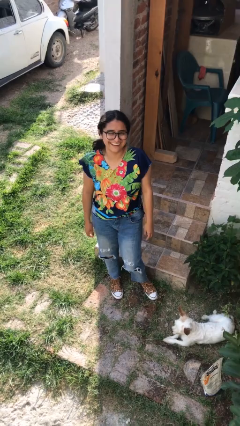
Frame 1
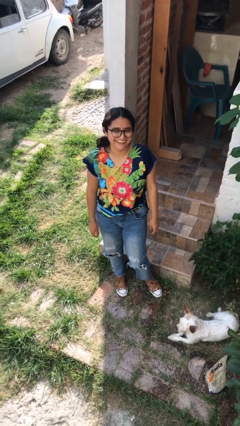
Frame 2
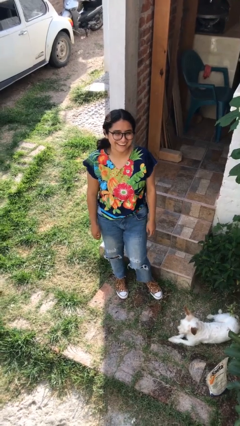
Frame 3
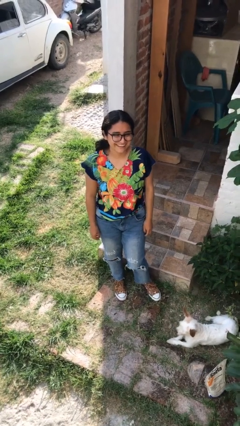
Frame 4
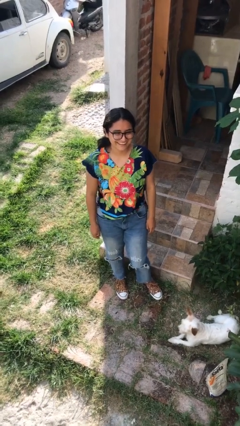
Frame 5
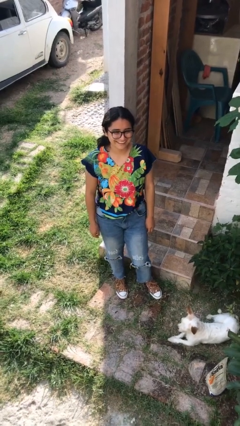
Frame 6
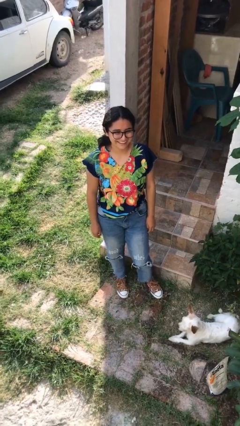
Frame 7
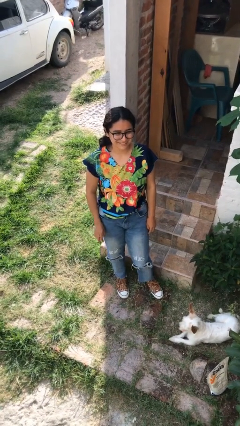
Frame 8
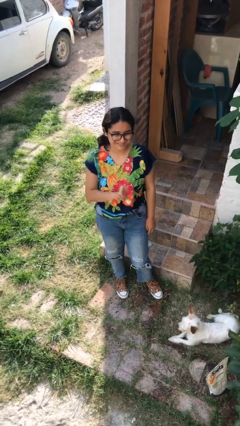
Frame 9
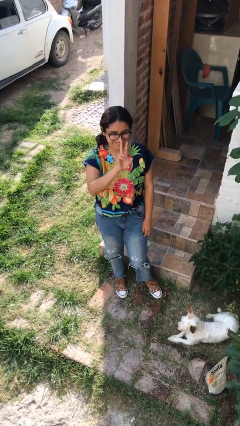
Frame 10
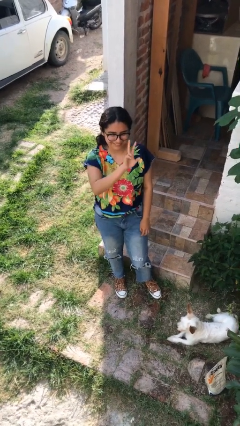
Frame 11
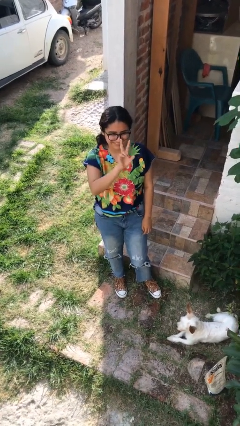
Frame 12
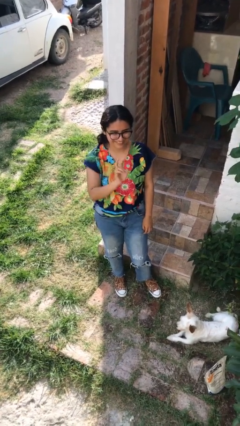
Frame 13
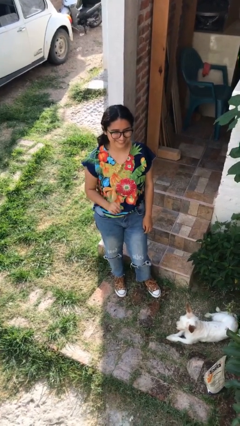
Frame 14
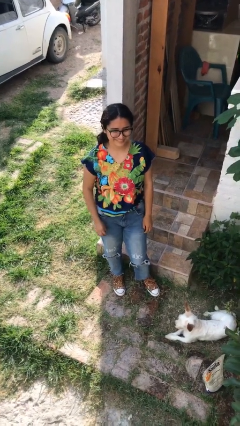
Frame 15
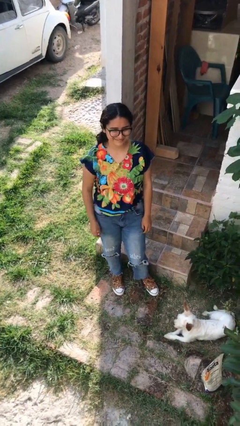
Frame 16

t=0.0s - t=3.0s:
person gestures peace

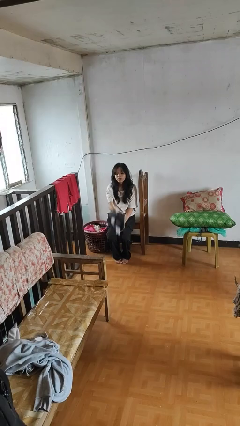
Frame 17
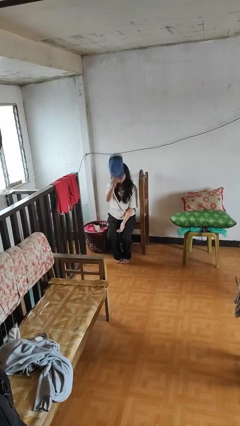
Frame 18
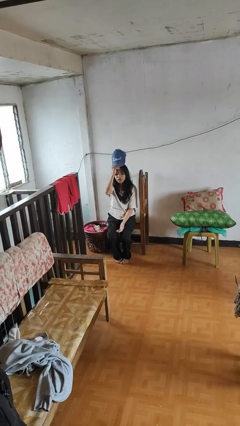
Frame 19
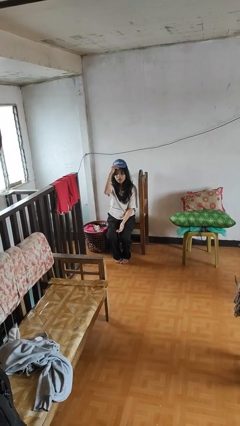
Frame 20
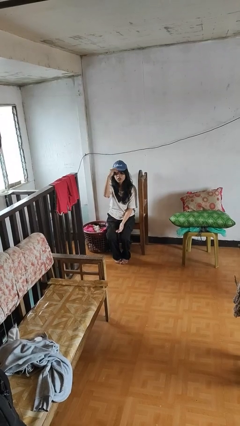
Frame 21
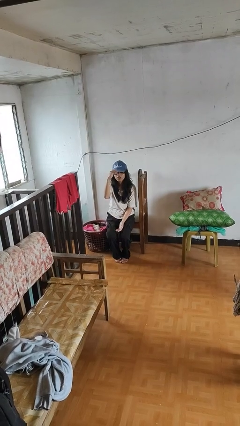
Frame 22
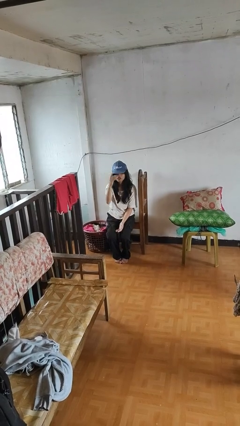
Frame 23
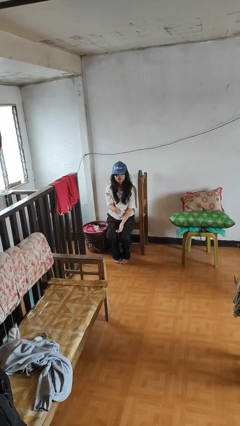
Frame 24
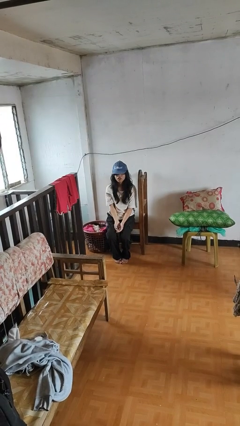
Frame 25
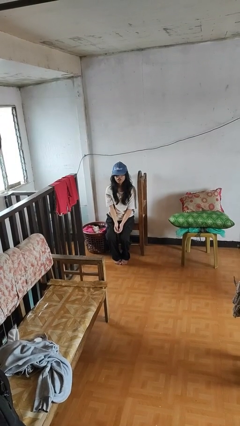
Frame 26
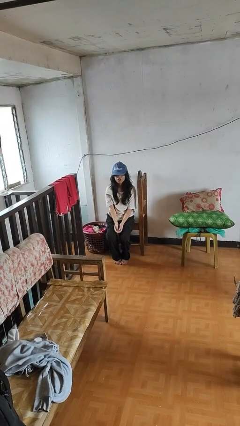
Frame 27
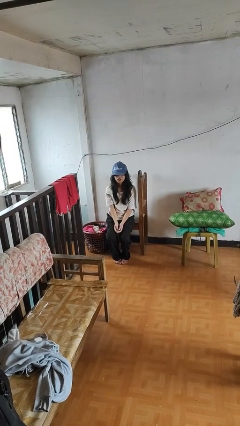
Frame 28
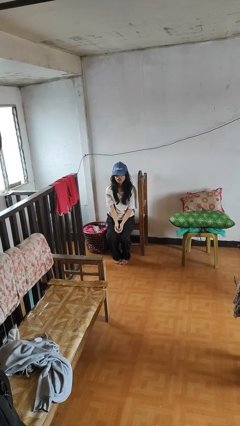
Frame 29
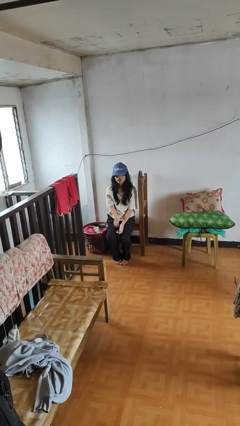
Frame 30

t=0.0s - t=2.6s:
person puts on hat

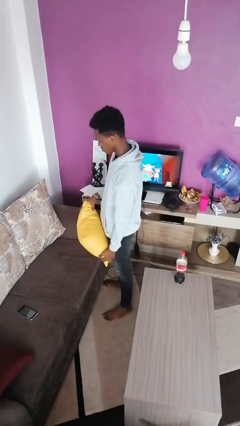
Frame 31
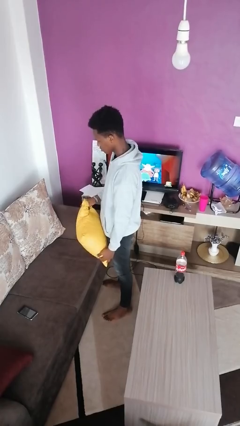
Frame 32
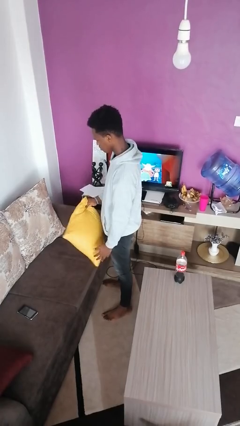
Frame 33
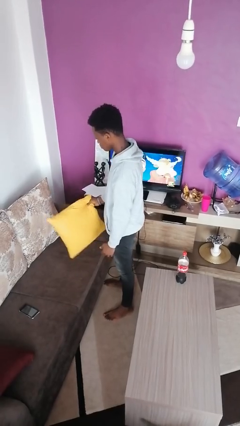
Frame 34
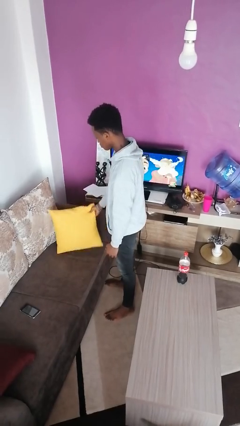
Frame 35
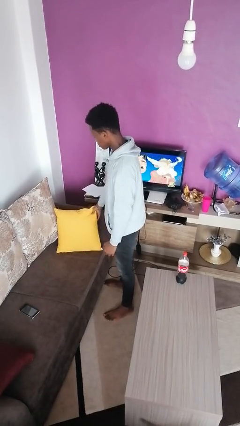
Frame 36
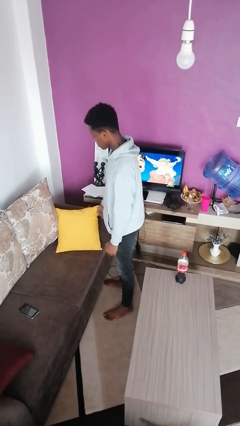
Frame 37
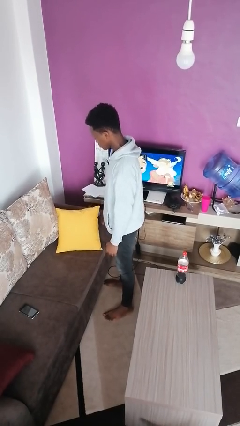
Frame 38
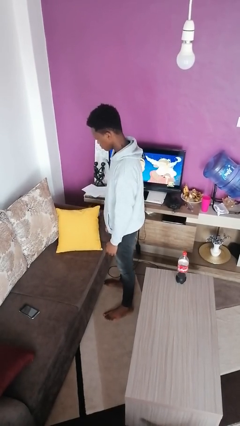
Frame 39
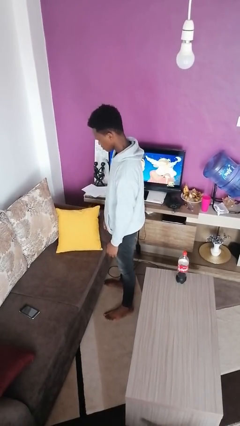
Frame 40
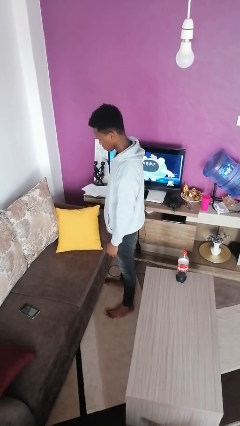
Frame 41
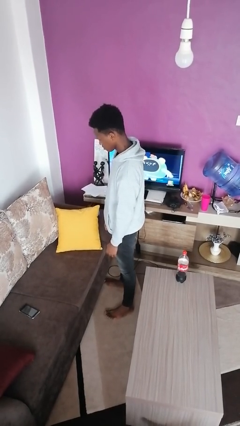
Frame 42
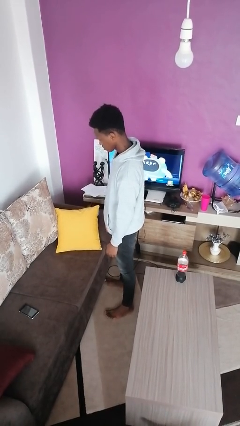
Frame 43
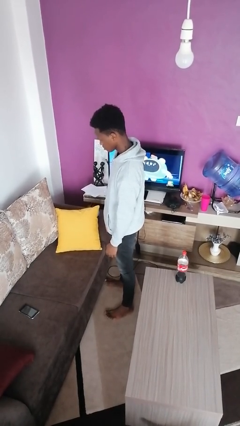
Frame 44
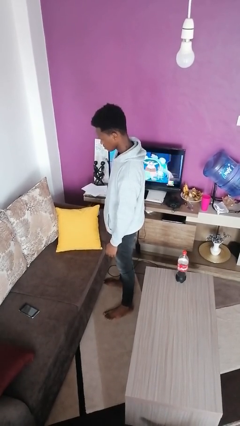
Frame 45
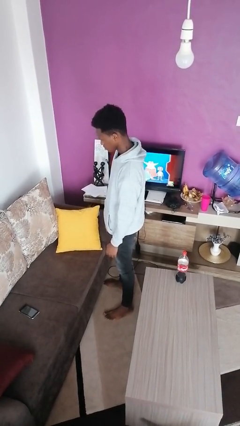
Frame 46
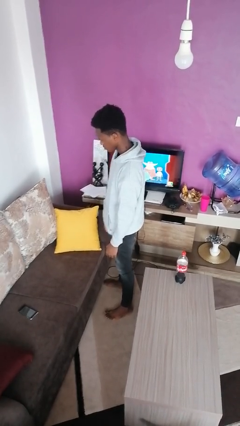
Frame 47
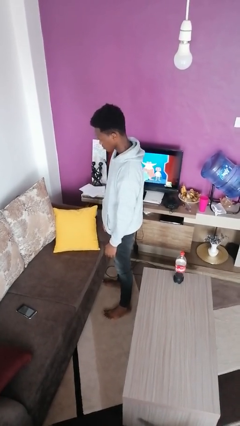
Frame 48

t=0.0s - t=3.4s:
person puts down object on couch

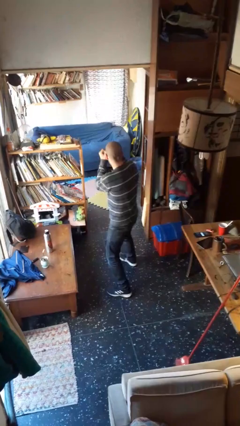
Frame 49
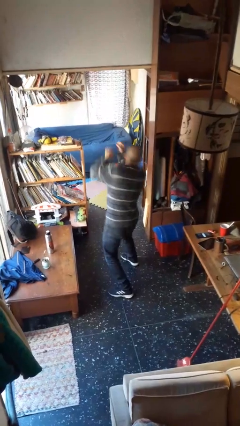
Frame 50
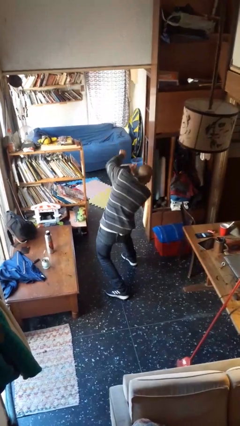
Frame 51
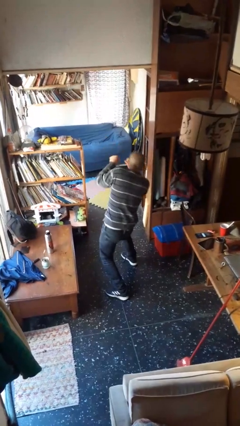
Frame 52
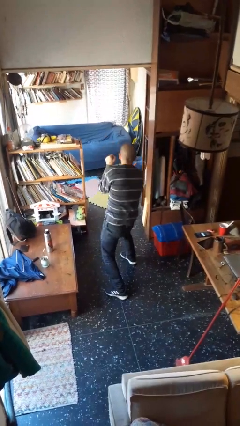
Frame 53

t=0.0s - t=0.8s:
person punches

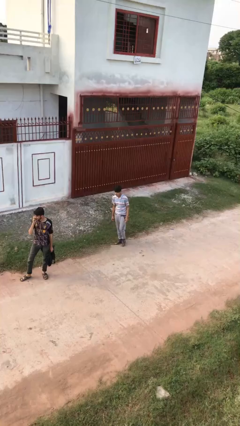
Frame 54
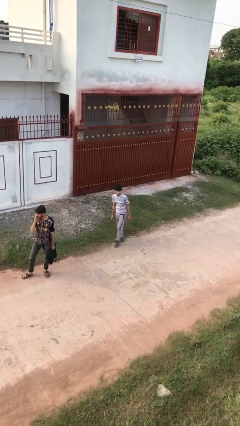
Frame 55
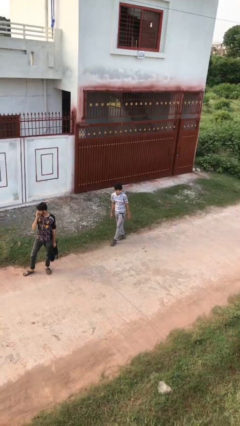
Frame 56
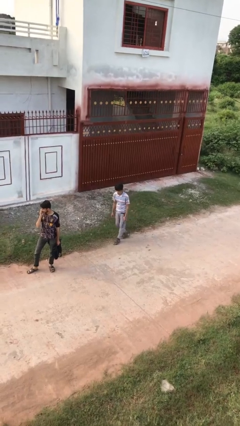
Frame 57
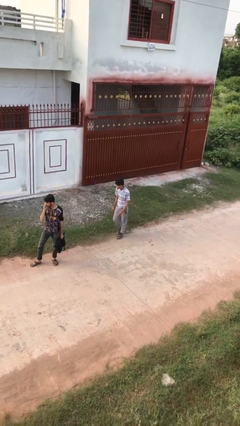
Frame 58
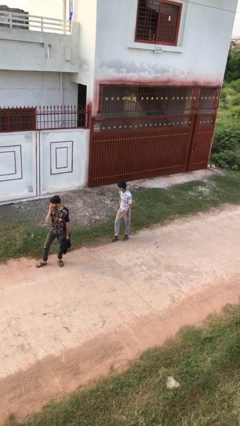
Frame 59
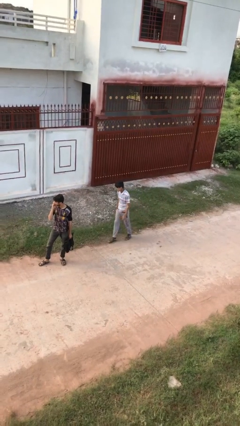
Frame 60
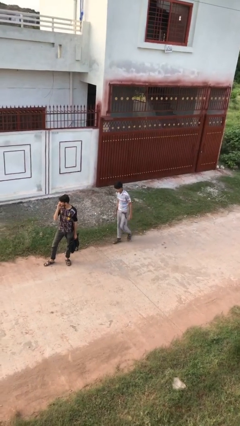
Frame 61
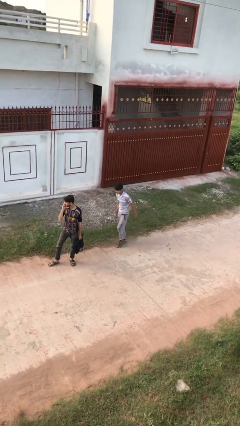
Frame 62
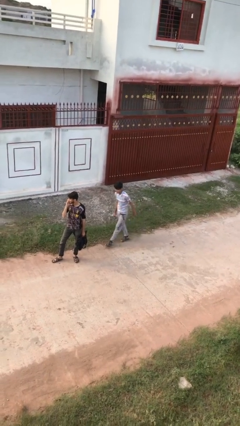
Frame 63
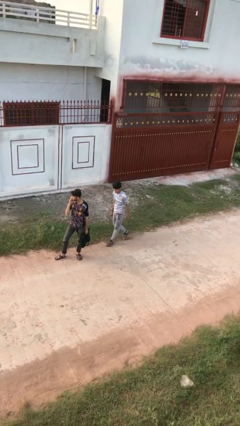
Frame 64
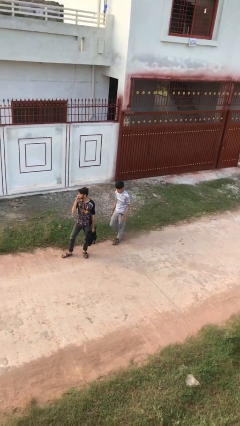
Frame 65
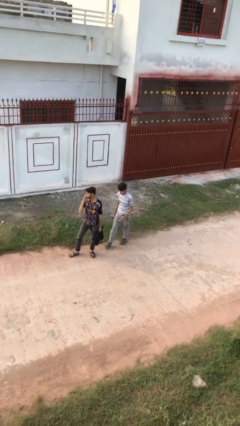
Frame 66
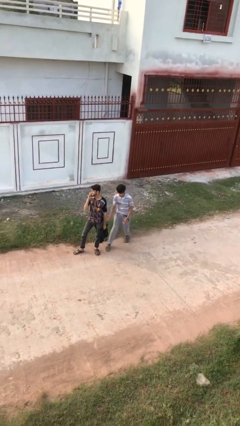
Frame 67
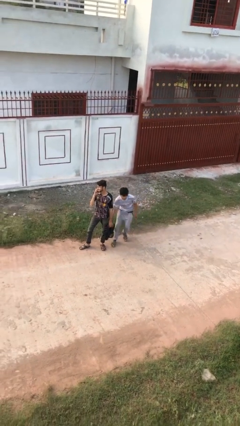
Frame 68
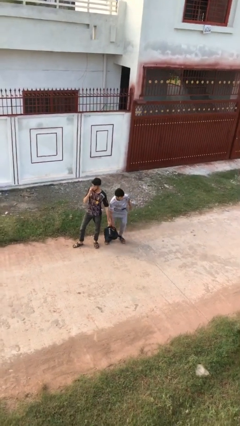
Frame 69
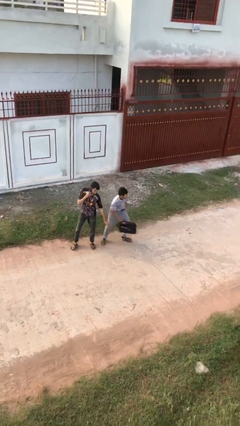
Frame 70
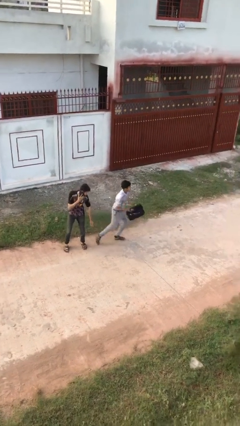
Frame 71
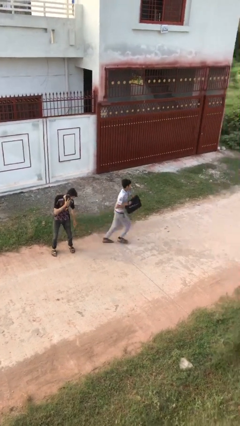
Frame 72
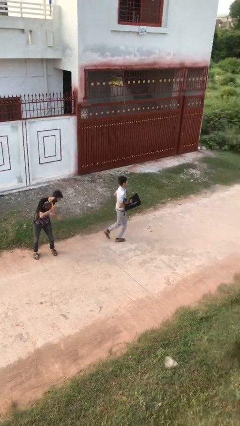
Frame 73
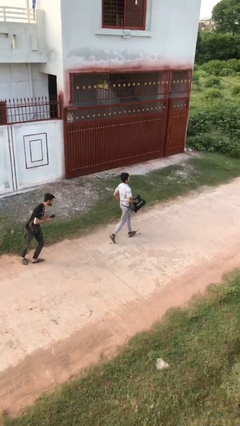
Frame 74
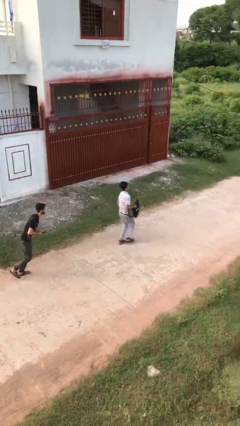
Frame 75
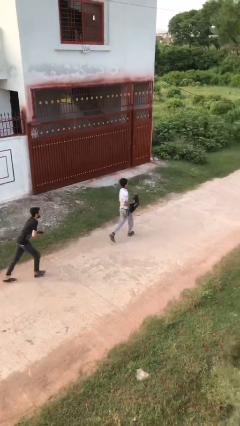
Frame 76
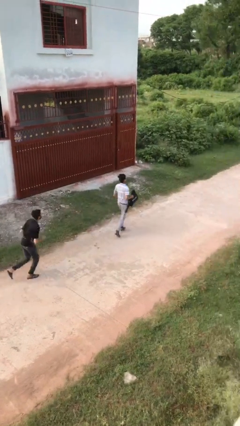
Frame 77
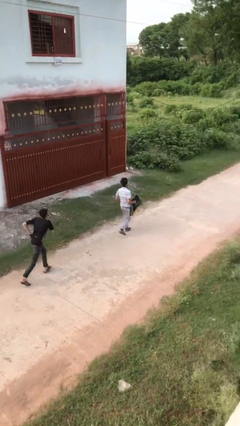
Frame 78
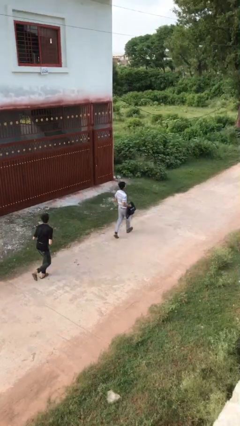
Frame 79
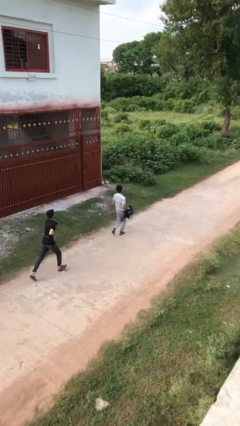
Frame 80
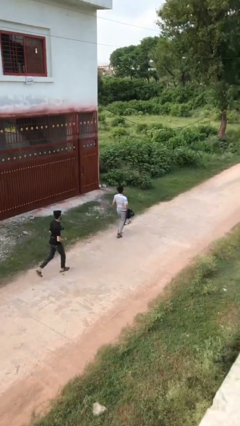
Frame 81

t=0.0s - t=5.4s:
person steals object from person

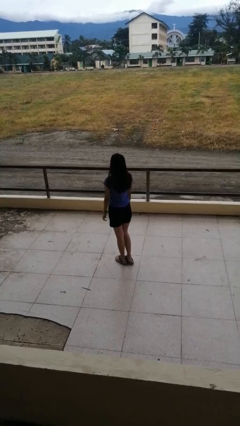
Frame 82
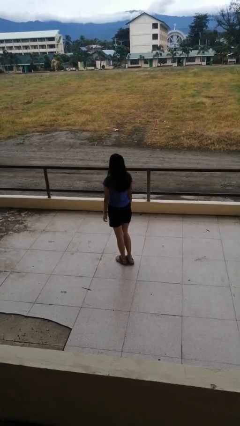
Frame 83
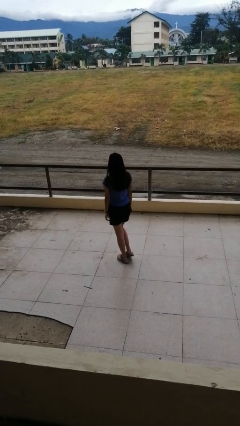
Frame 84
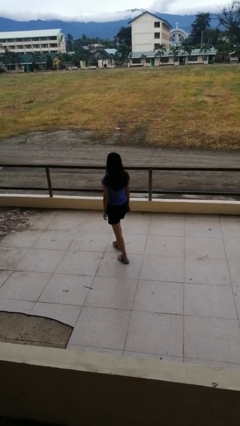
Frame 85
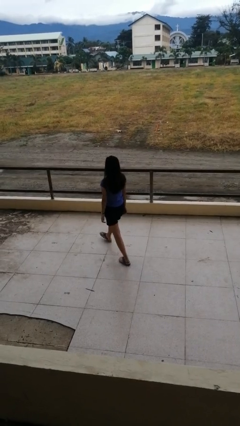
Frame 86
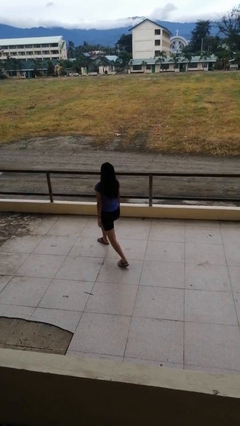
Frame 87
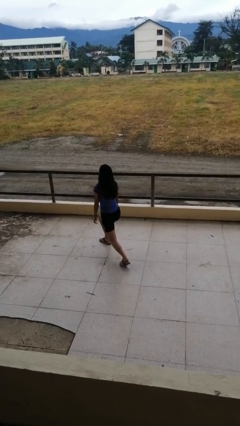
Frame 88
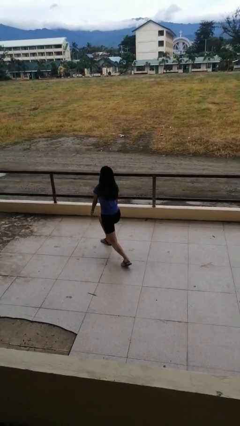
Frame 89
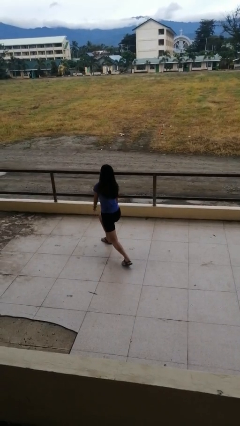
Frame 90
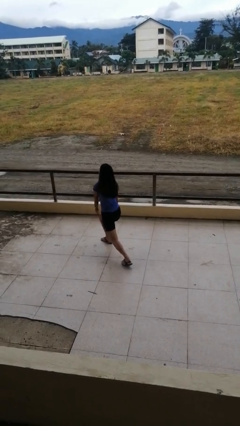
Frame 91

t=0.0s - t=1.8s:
person exercises with lunges

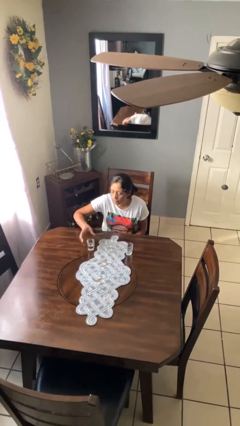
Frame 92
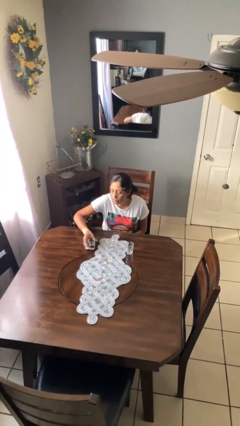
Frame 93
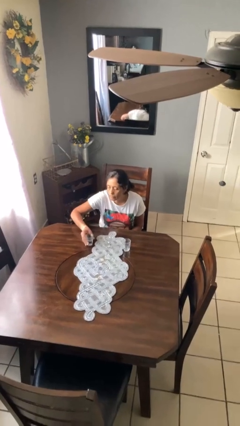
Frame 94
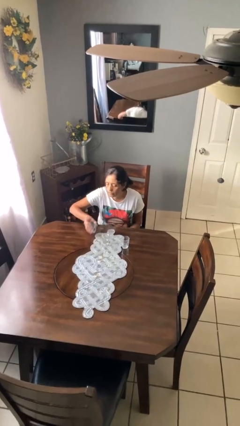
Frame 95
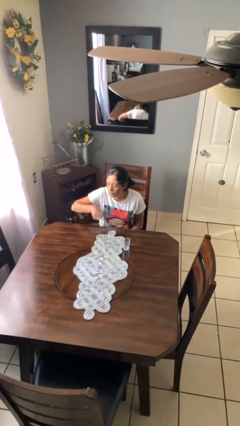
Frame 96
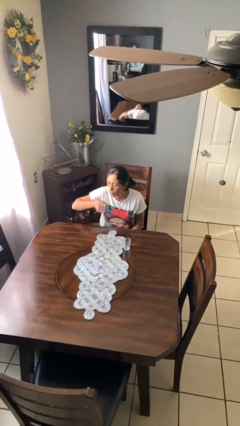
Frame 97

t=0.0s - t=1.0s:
person picks up object from table
